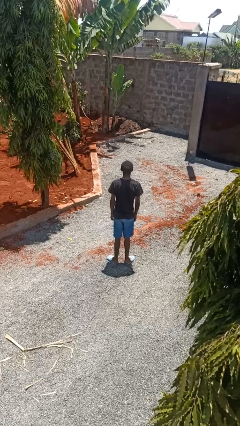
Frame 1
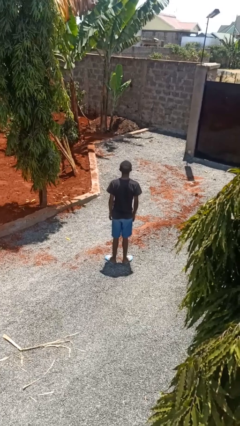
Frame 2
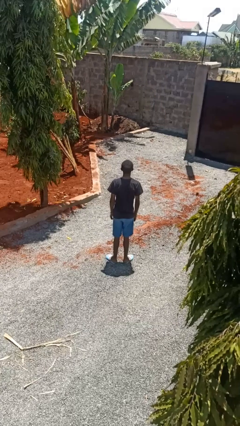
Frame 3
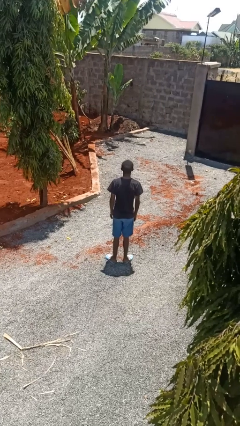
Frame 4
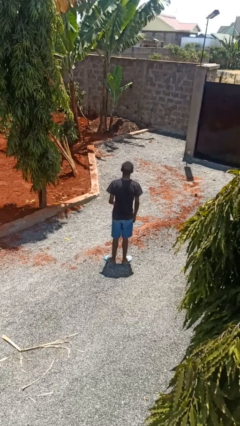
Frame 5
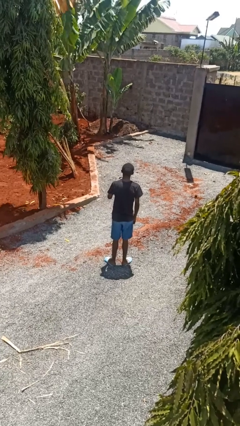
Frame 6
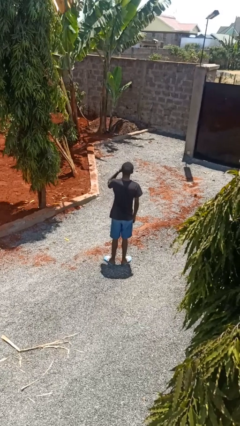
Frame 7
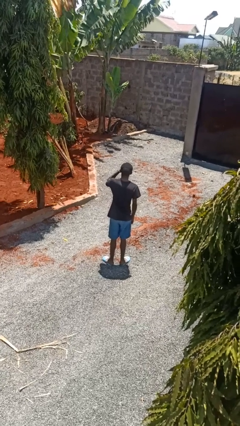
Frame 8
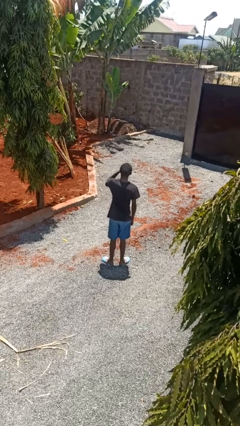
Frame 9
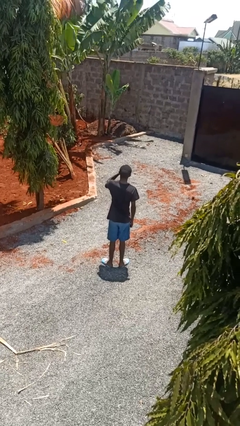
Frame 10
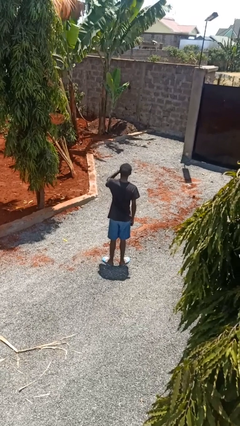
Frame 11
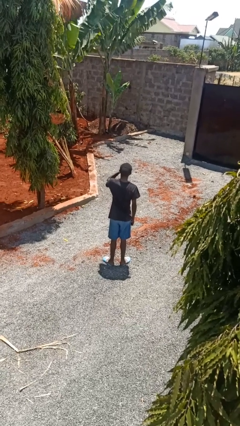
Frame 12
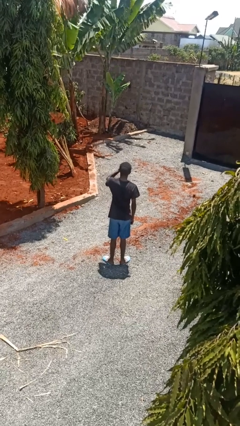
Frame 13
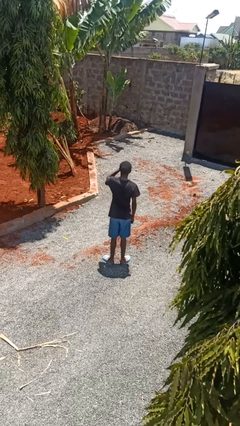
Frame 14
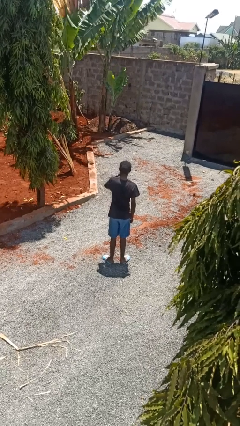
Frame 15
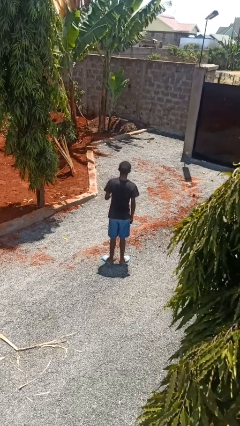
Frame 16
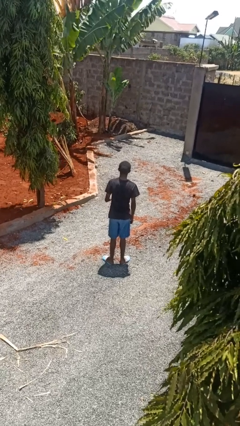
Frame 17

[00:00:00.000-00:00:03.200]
person rubs eyes

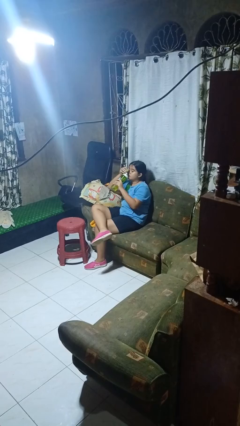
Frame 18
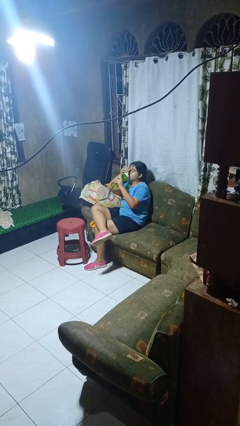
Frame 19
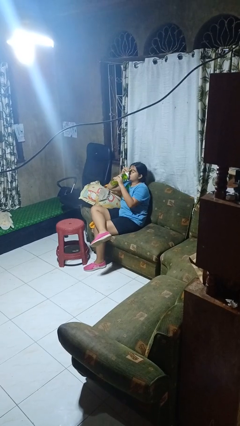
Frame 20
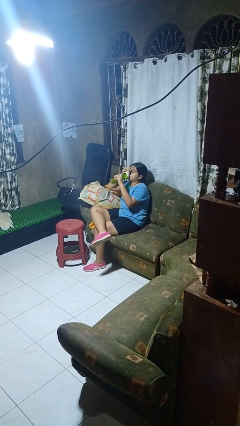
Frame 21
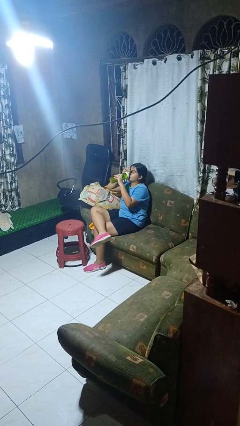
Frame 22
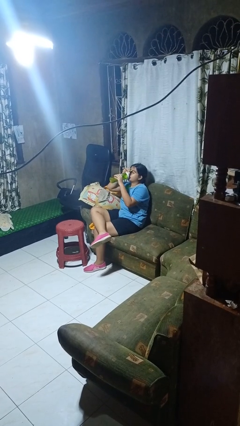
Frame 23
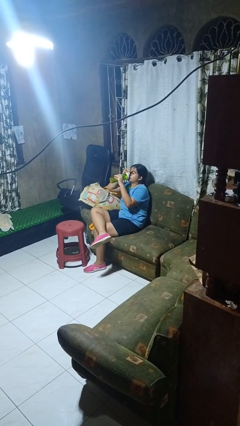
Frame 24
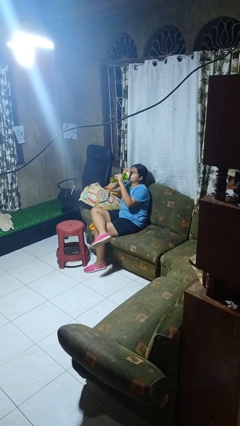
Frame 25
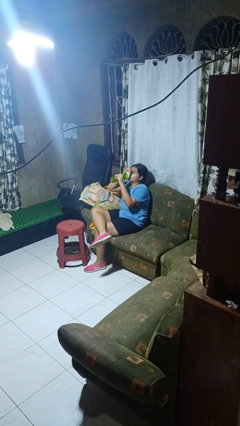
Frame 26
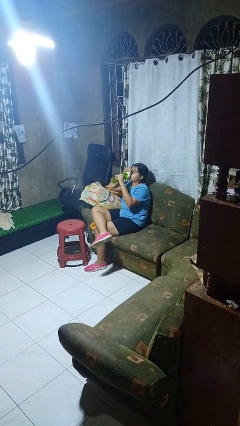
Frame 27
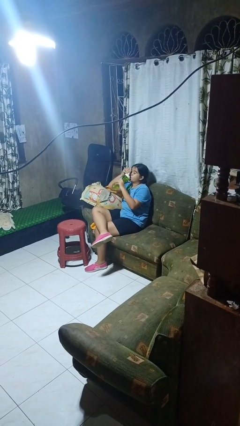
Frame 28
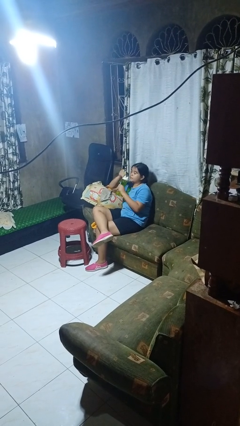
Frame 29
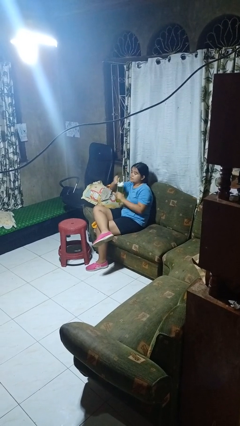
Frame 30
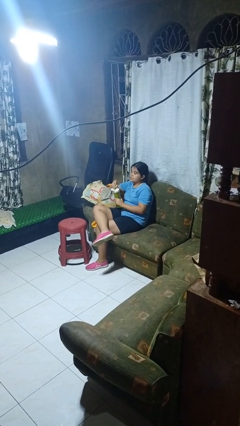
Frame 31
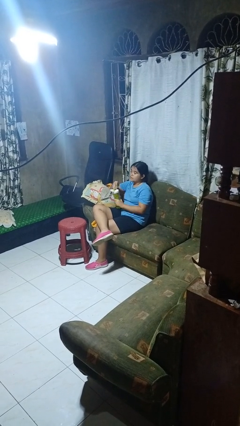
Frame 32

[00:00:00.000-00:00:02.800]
person drinks from bottle

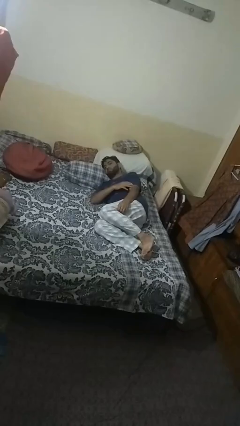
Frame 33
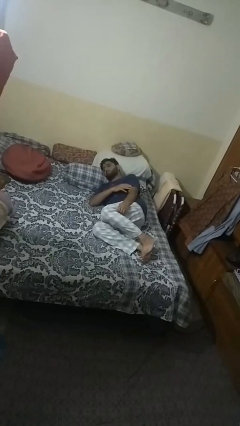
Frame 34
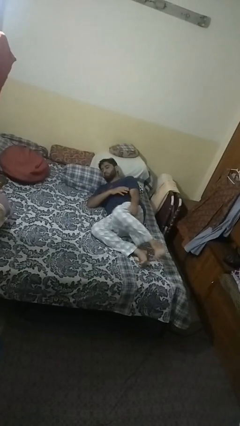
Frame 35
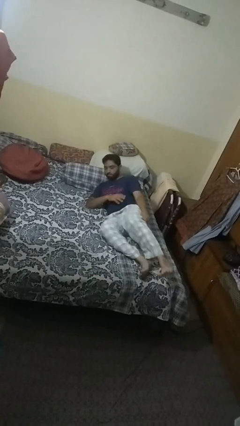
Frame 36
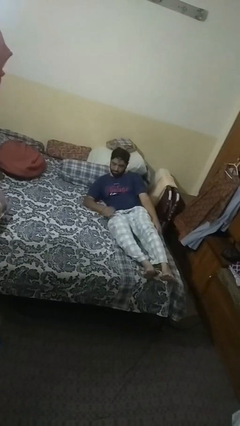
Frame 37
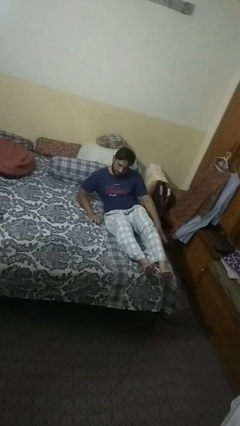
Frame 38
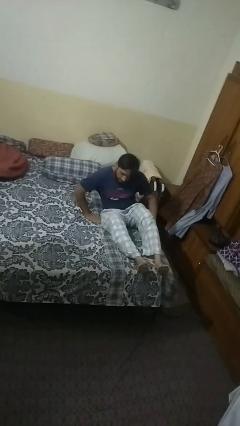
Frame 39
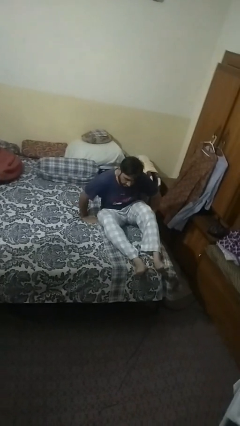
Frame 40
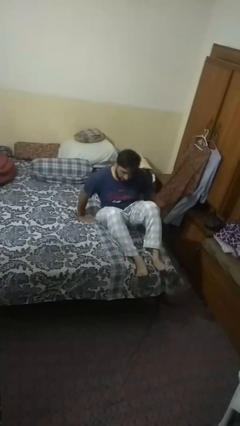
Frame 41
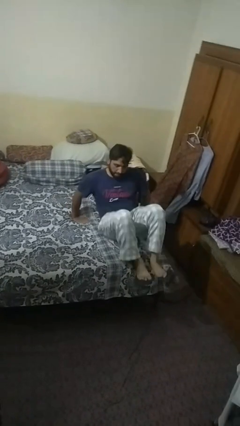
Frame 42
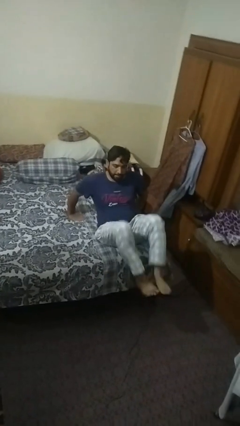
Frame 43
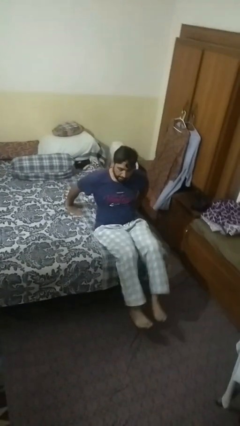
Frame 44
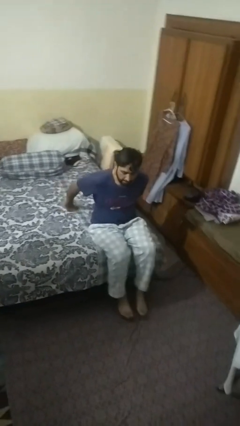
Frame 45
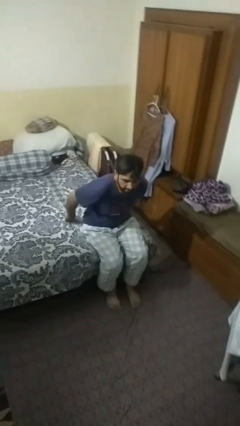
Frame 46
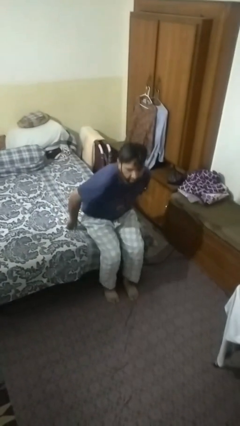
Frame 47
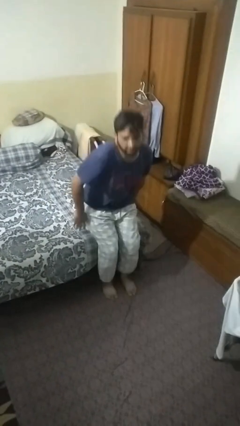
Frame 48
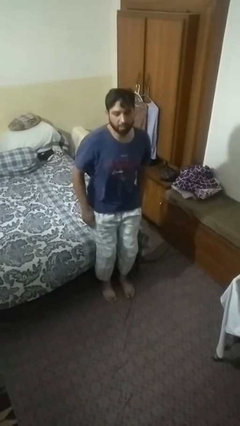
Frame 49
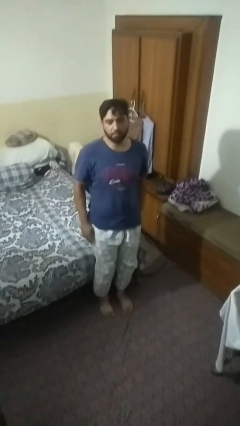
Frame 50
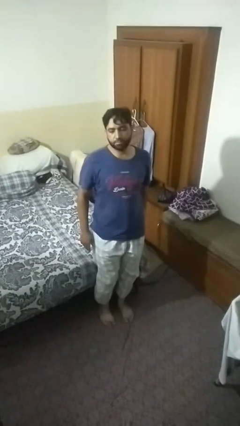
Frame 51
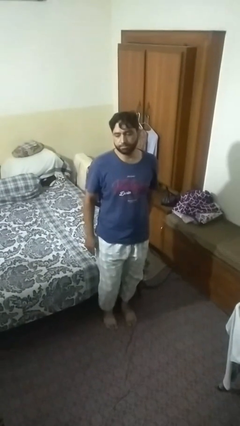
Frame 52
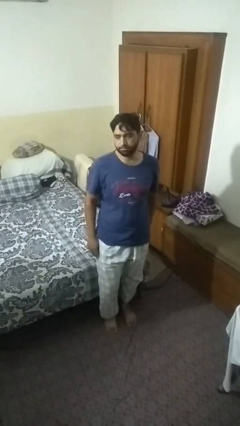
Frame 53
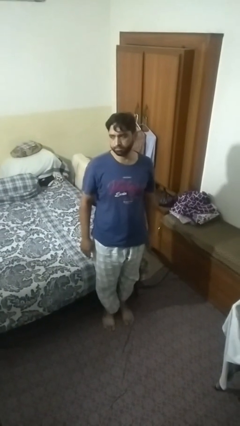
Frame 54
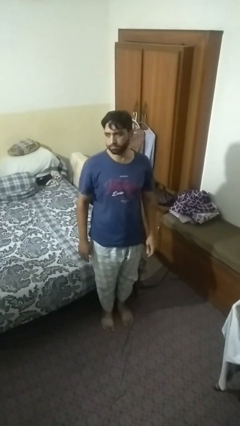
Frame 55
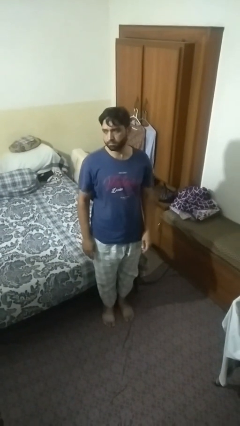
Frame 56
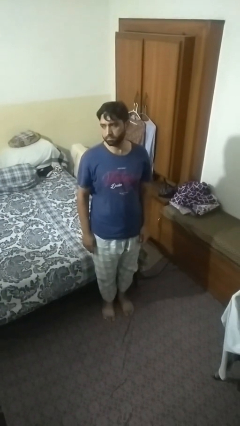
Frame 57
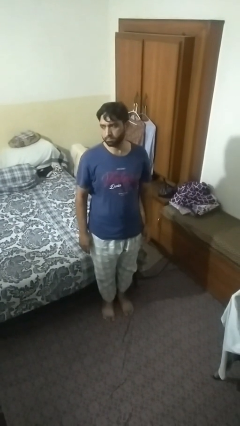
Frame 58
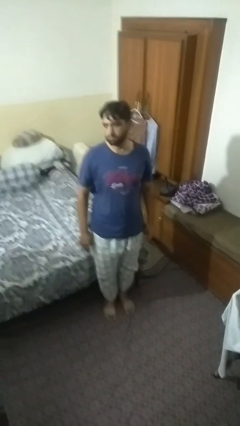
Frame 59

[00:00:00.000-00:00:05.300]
person stands up

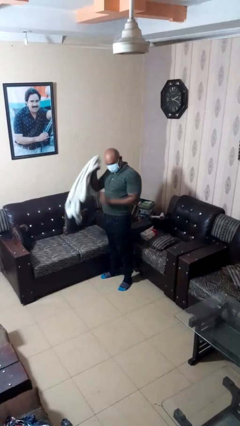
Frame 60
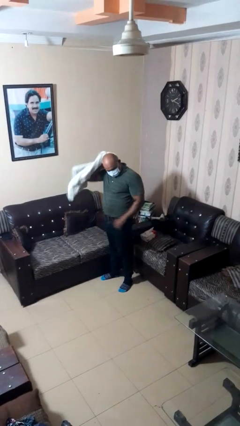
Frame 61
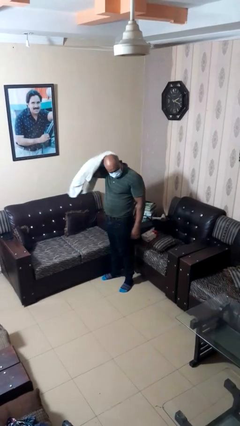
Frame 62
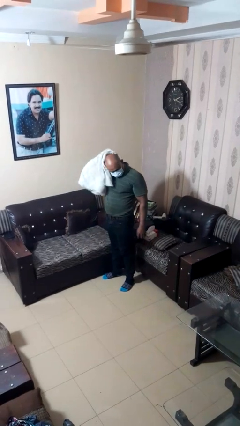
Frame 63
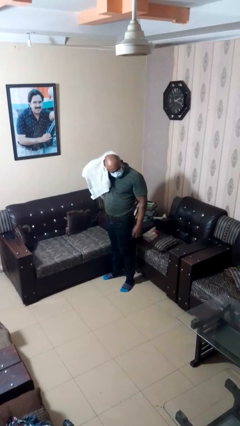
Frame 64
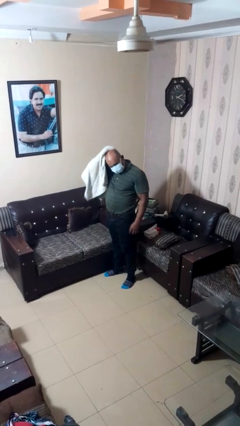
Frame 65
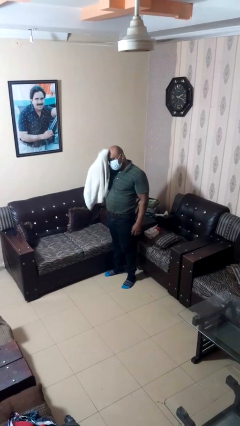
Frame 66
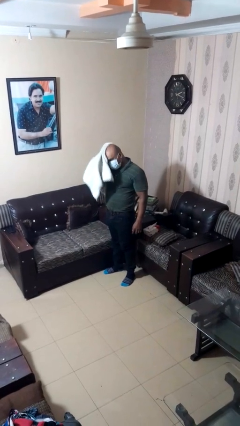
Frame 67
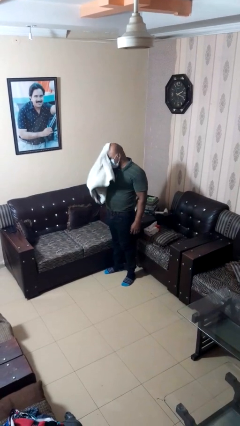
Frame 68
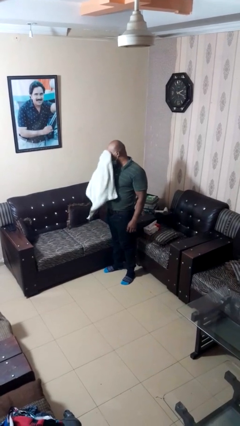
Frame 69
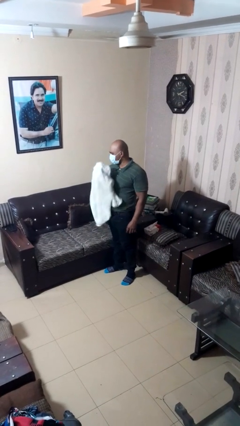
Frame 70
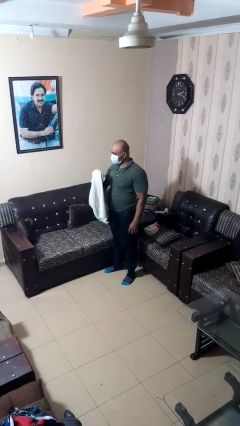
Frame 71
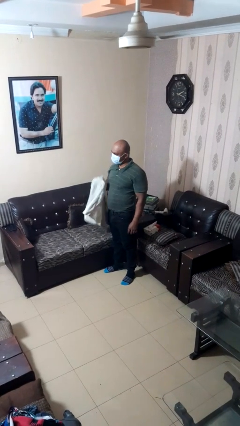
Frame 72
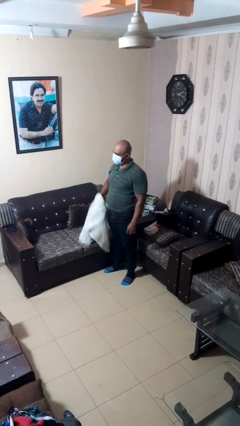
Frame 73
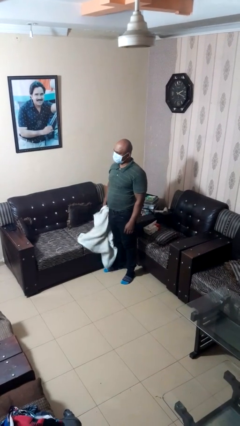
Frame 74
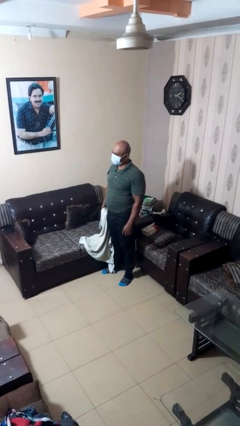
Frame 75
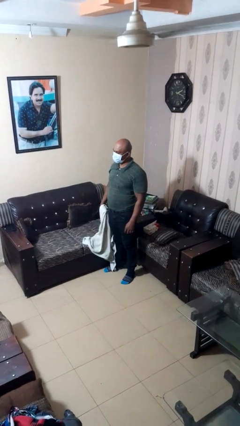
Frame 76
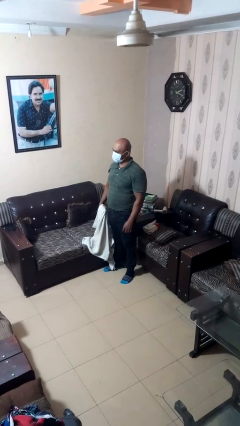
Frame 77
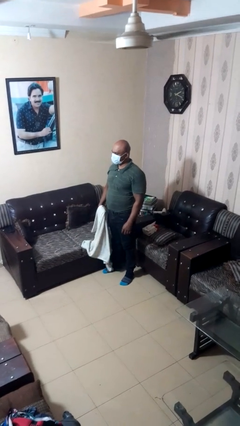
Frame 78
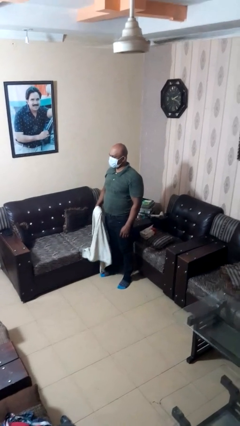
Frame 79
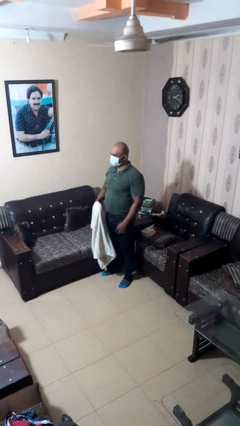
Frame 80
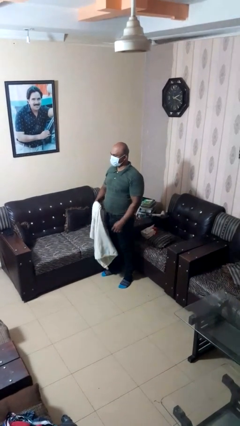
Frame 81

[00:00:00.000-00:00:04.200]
person dries hair with towel

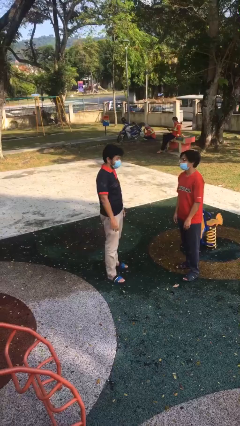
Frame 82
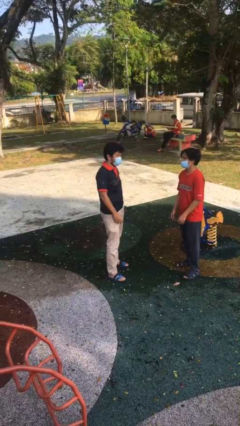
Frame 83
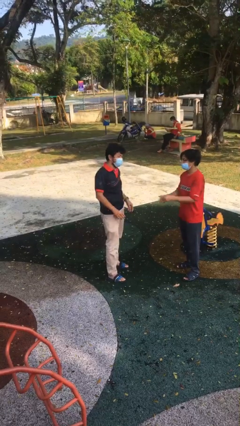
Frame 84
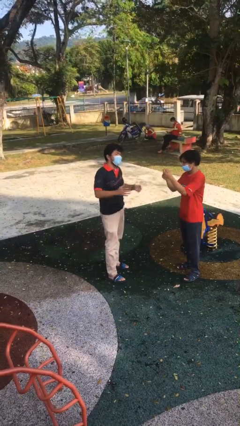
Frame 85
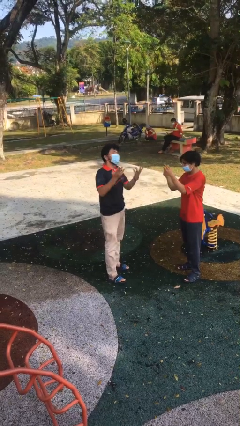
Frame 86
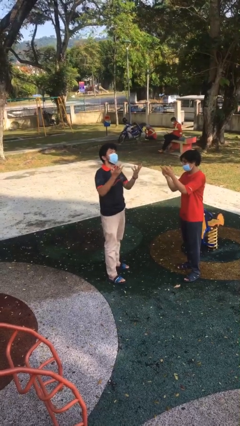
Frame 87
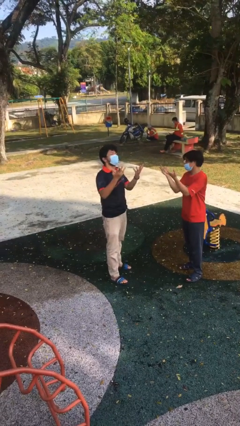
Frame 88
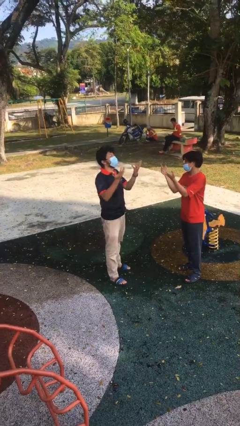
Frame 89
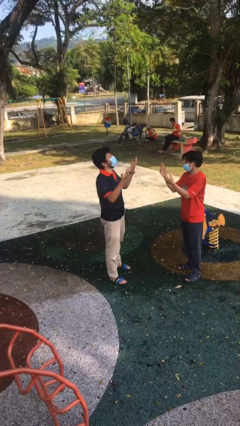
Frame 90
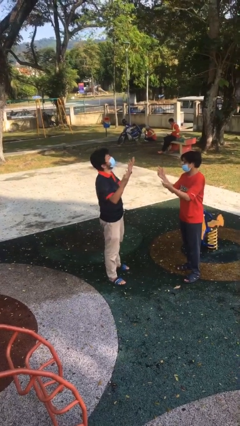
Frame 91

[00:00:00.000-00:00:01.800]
person talks to person

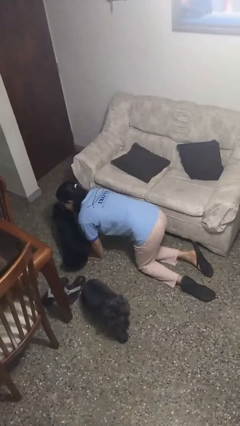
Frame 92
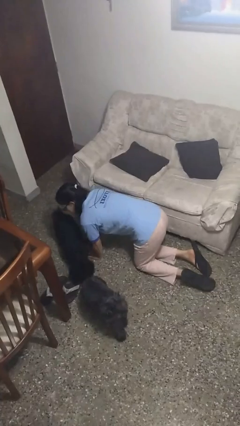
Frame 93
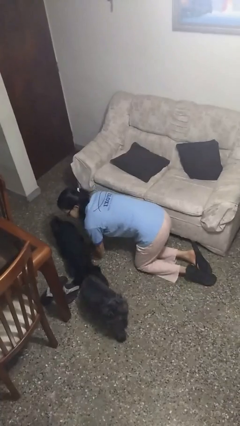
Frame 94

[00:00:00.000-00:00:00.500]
person crawls
